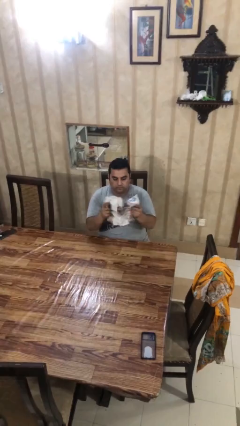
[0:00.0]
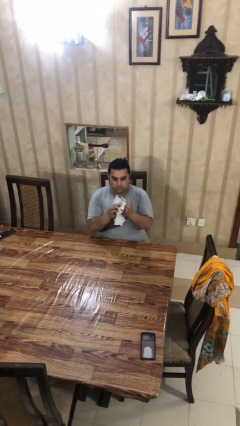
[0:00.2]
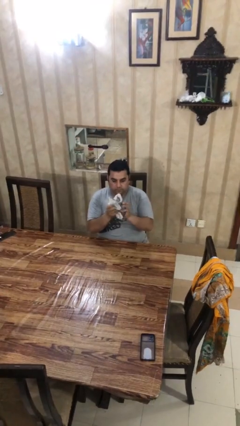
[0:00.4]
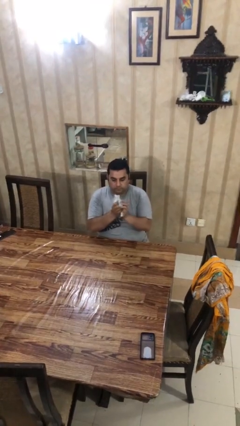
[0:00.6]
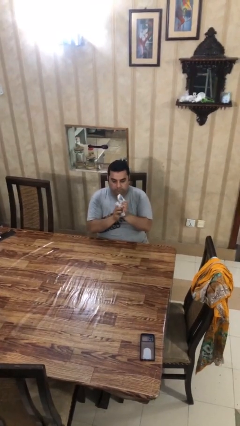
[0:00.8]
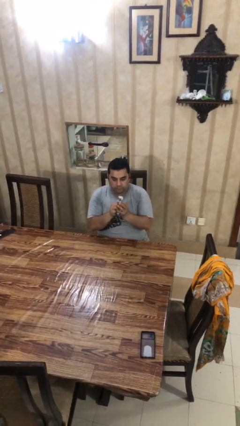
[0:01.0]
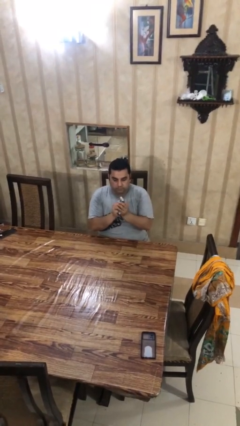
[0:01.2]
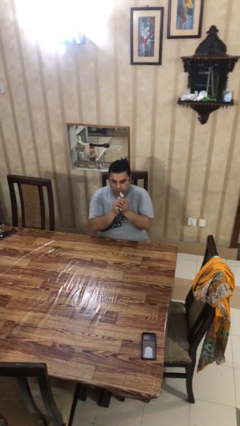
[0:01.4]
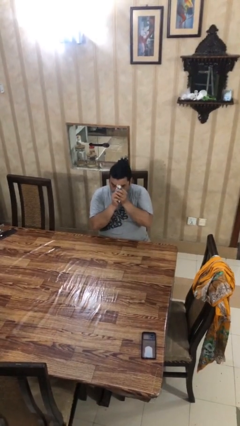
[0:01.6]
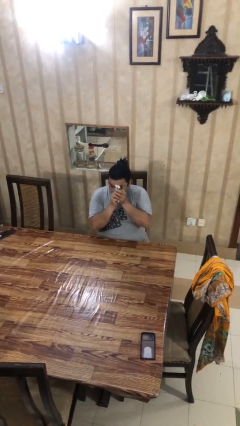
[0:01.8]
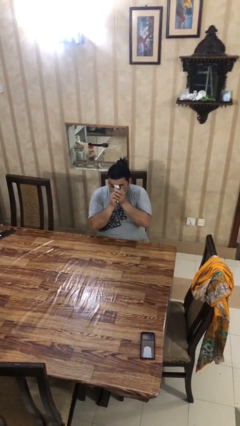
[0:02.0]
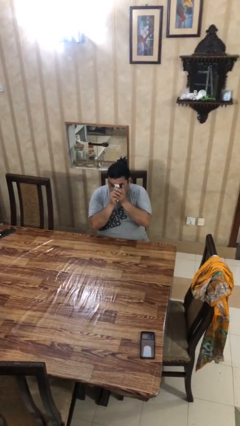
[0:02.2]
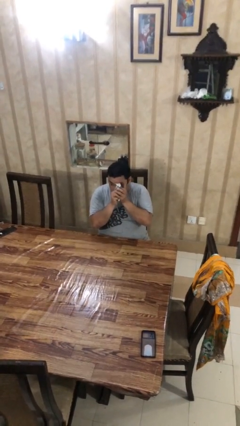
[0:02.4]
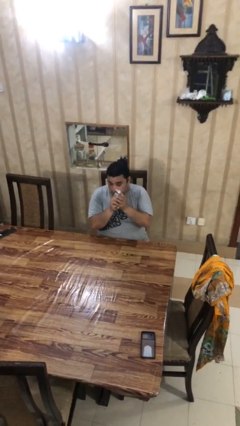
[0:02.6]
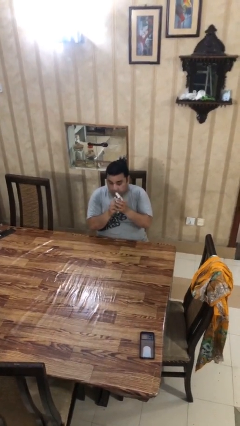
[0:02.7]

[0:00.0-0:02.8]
person crumples paper

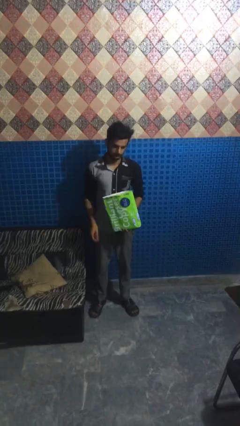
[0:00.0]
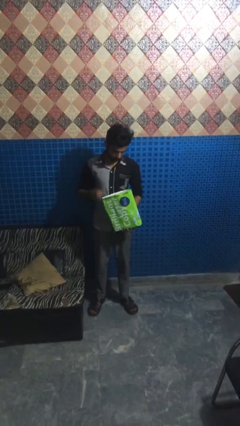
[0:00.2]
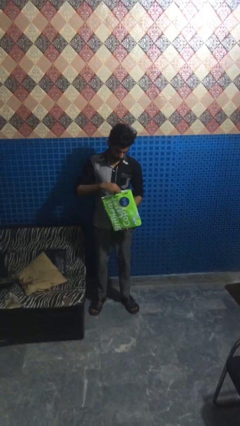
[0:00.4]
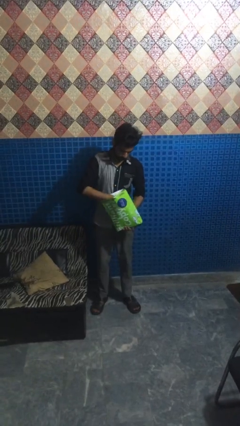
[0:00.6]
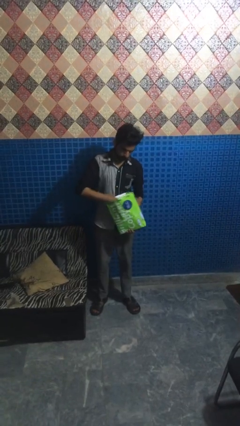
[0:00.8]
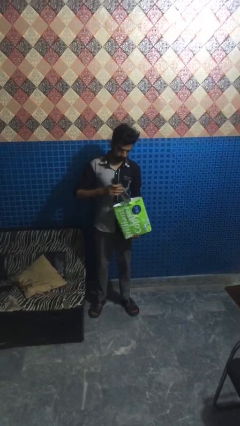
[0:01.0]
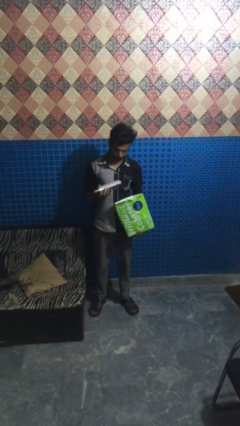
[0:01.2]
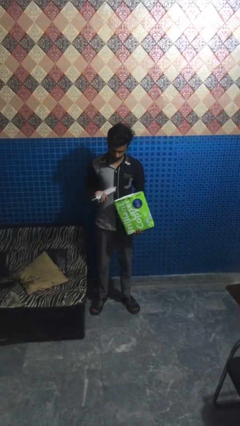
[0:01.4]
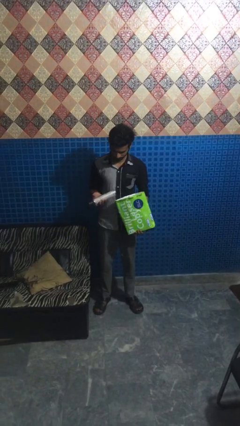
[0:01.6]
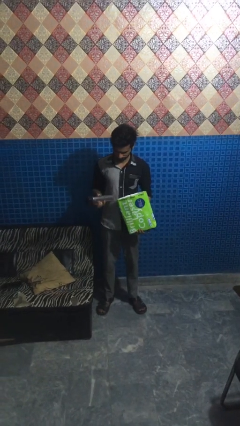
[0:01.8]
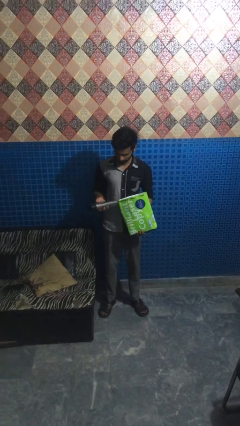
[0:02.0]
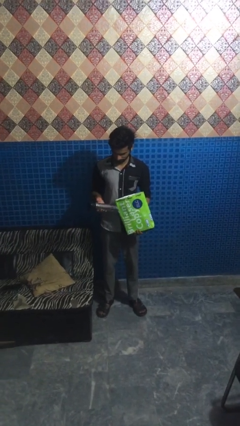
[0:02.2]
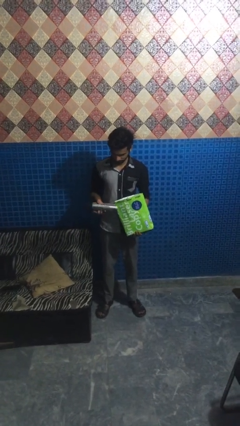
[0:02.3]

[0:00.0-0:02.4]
person takes object from bag

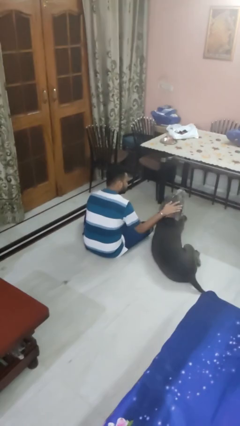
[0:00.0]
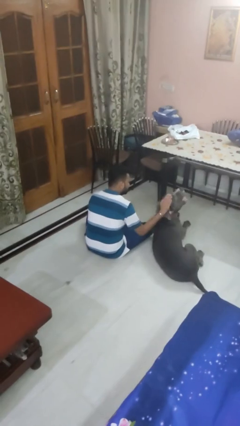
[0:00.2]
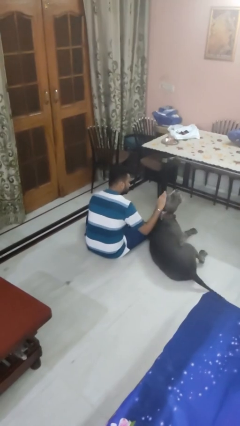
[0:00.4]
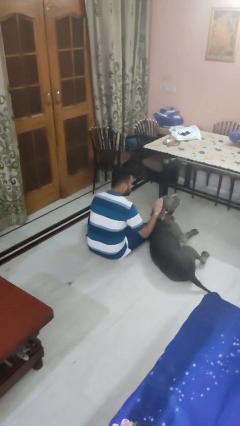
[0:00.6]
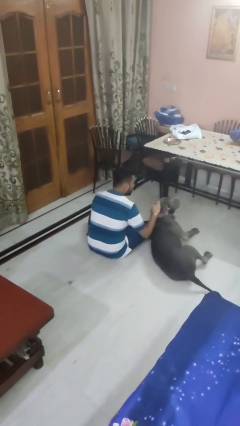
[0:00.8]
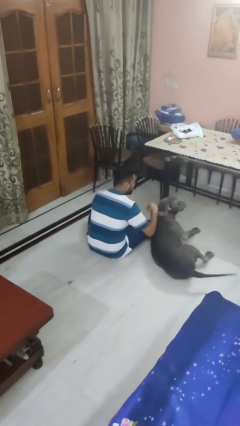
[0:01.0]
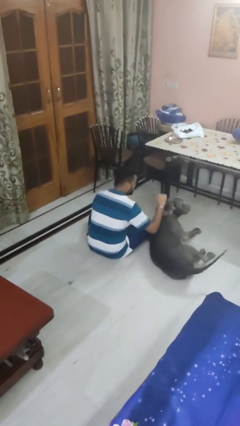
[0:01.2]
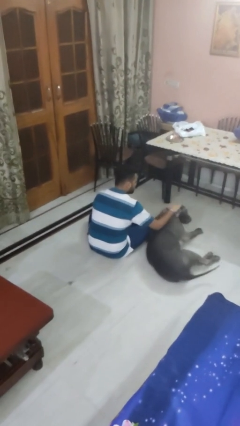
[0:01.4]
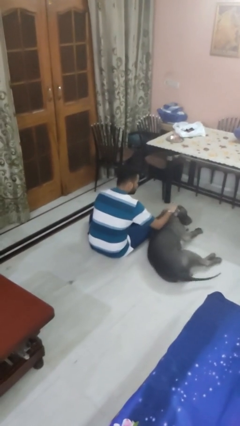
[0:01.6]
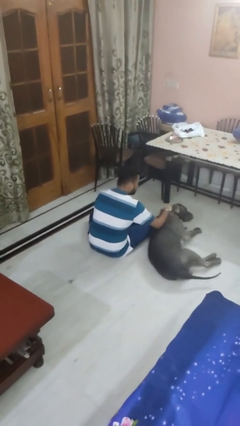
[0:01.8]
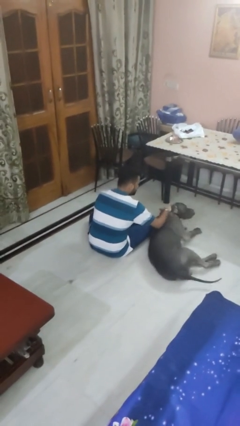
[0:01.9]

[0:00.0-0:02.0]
person pets dog

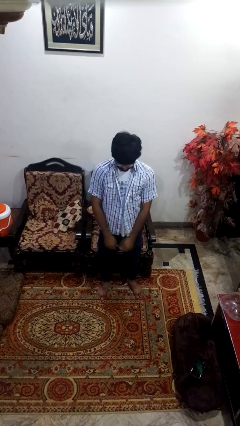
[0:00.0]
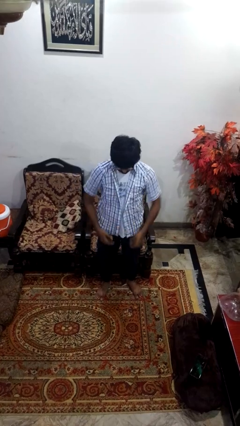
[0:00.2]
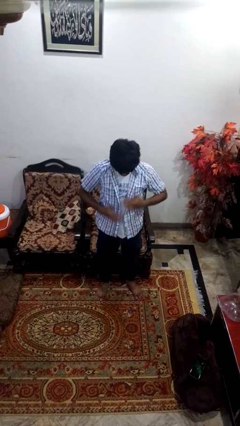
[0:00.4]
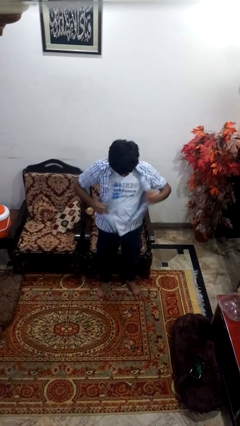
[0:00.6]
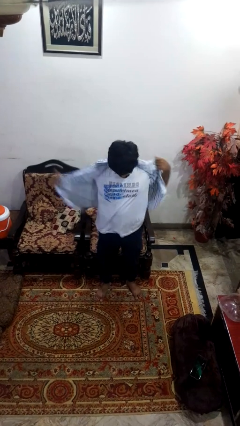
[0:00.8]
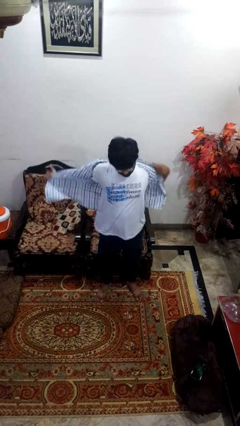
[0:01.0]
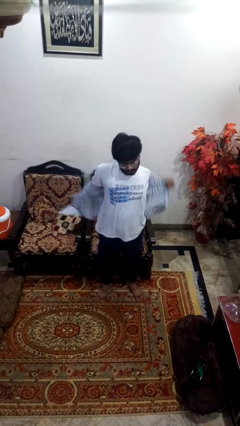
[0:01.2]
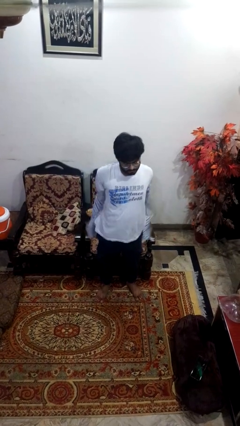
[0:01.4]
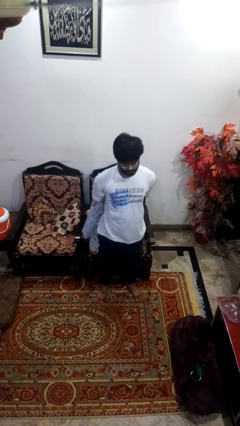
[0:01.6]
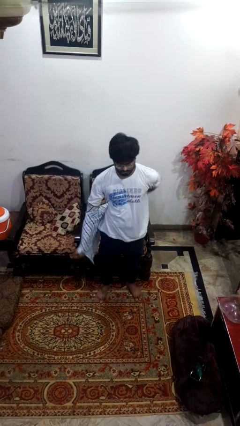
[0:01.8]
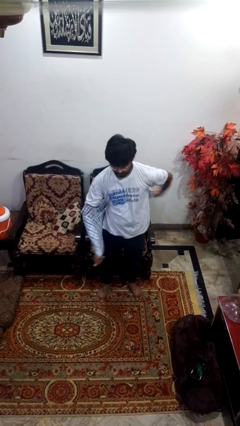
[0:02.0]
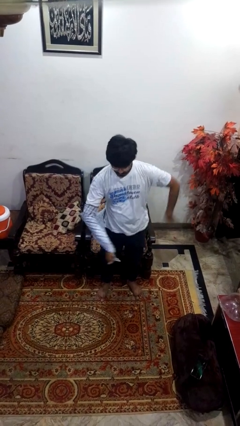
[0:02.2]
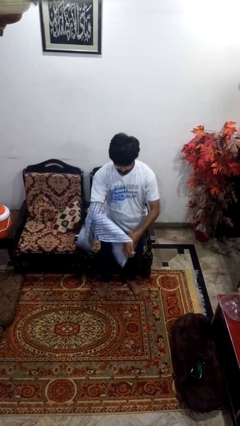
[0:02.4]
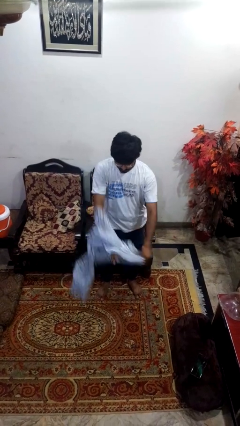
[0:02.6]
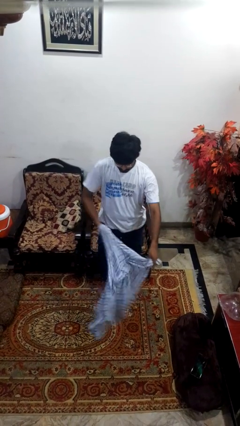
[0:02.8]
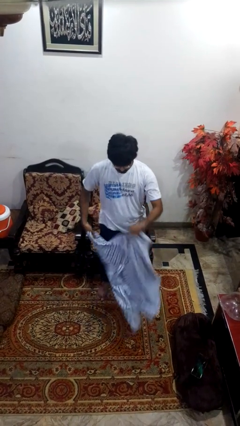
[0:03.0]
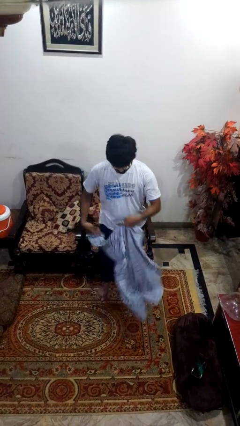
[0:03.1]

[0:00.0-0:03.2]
person takes off shirt

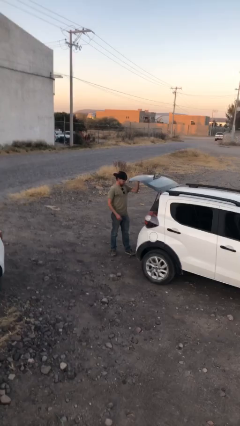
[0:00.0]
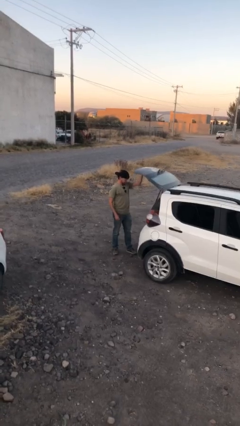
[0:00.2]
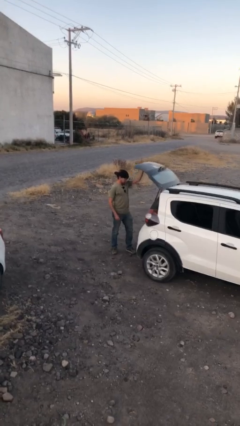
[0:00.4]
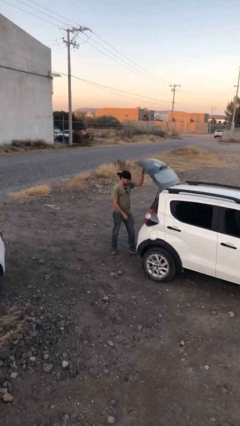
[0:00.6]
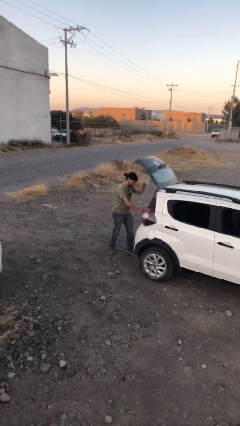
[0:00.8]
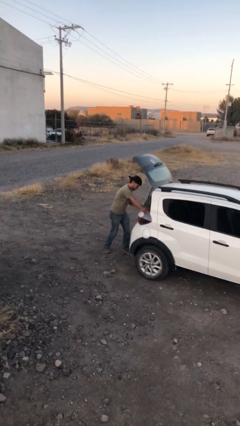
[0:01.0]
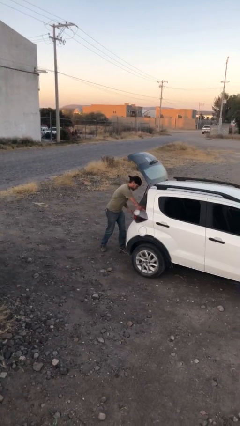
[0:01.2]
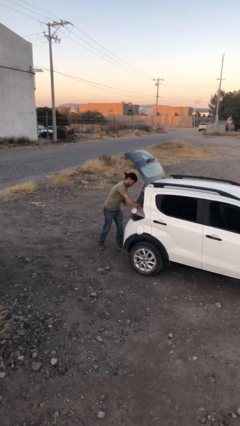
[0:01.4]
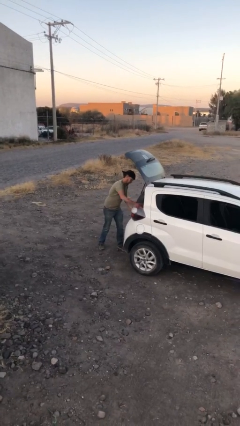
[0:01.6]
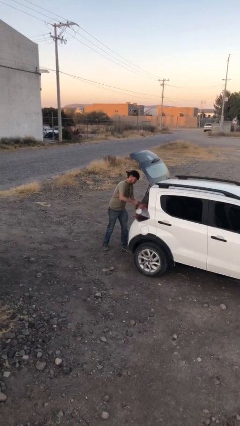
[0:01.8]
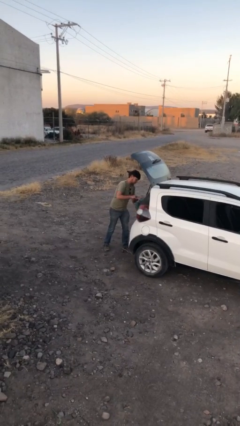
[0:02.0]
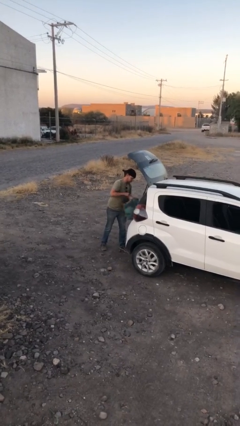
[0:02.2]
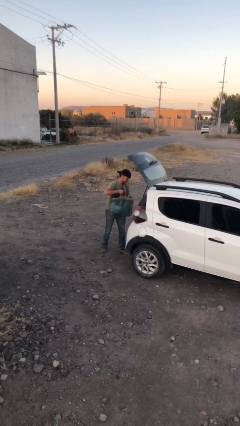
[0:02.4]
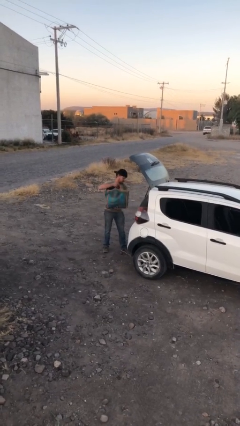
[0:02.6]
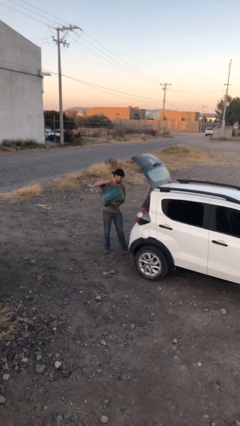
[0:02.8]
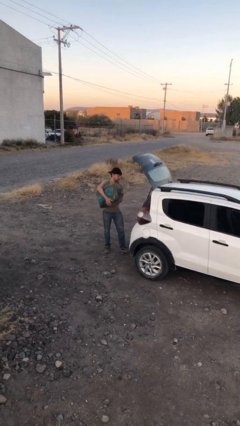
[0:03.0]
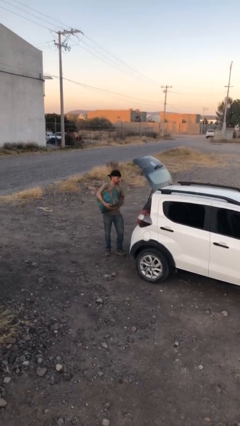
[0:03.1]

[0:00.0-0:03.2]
person unloads car

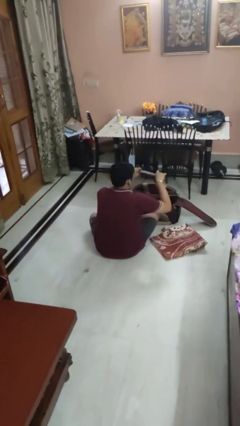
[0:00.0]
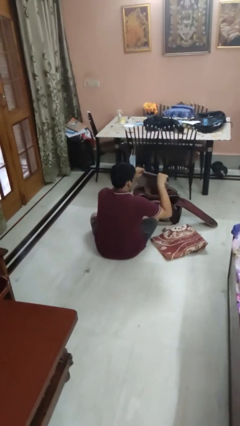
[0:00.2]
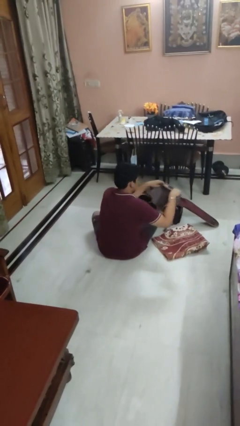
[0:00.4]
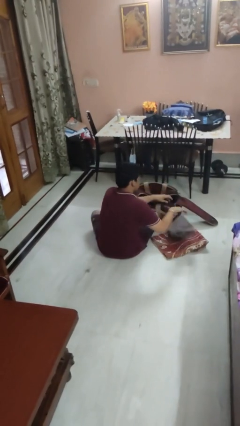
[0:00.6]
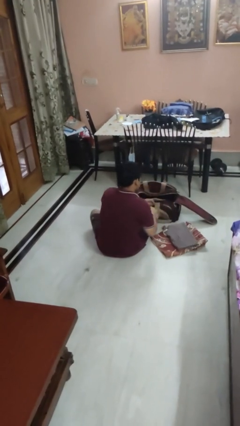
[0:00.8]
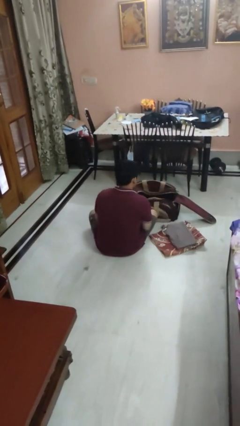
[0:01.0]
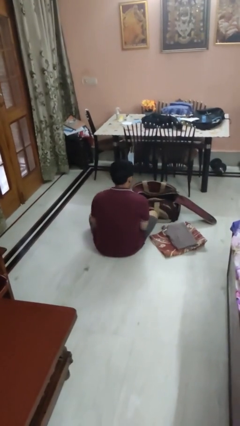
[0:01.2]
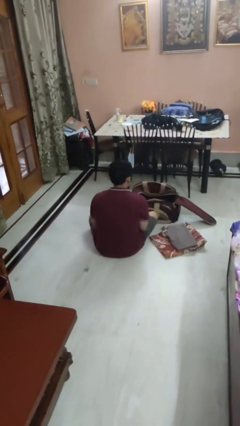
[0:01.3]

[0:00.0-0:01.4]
person unloads clothes from suitcase

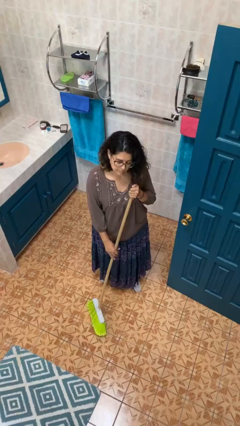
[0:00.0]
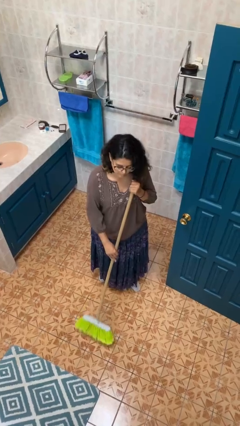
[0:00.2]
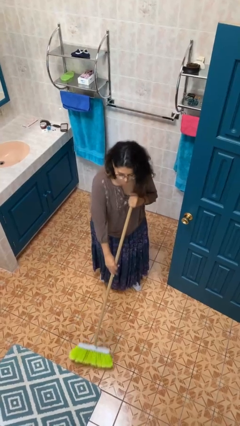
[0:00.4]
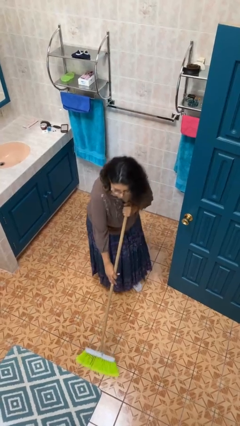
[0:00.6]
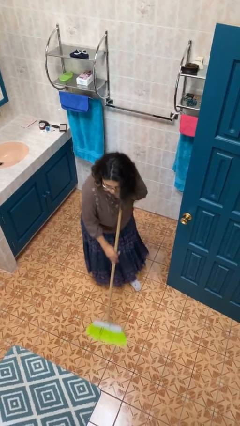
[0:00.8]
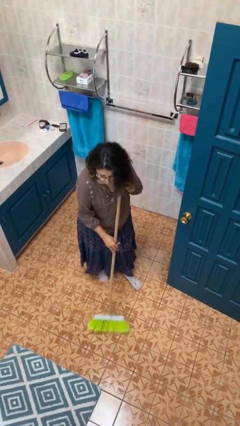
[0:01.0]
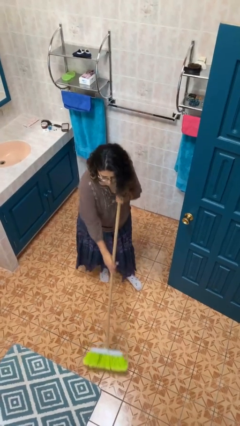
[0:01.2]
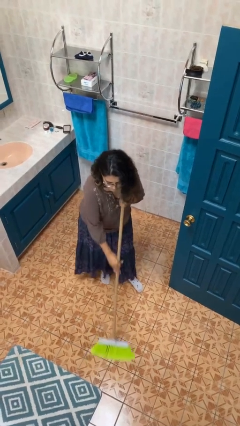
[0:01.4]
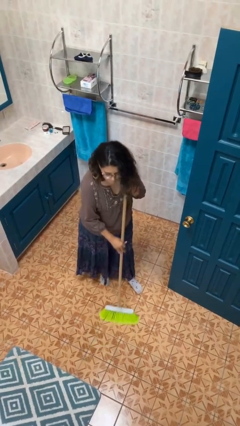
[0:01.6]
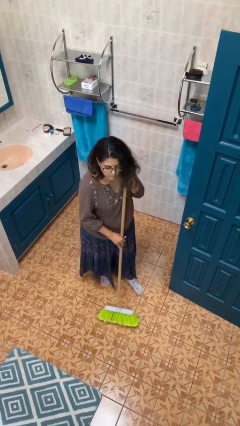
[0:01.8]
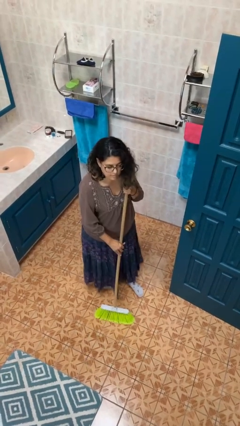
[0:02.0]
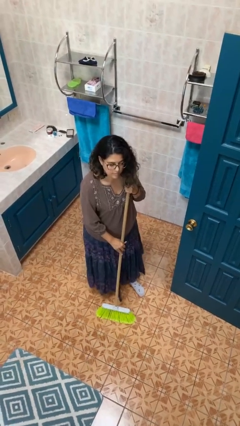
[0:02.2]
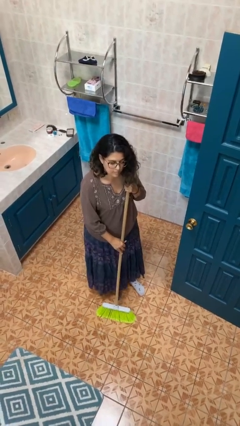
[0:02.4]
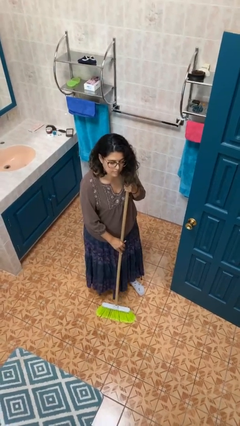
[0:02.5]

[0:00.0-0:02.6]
person sweeps floor
